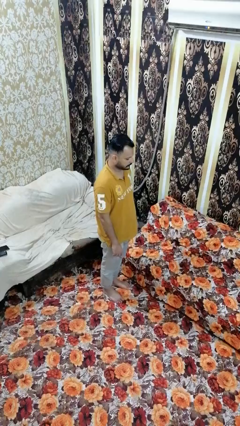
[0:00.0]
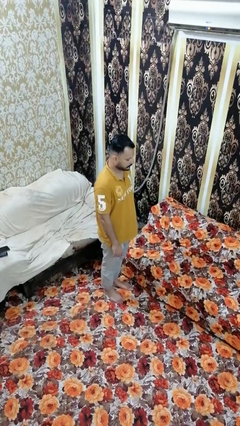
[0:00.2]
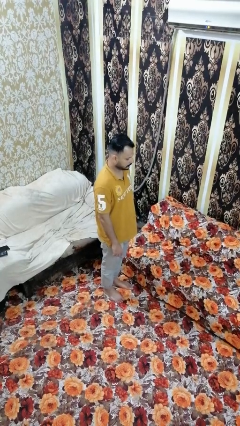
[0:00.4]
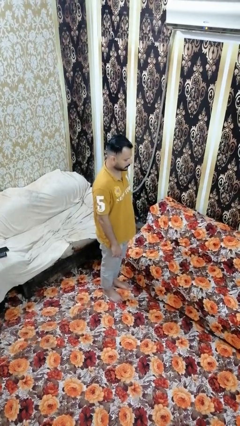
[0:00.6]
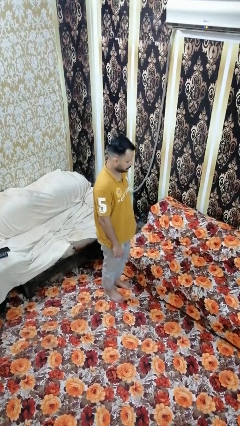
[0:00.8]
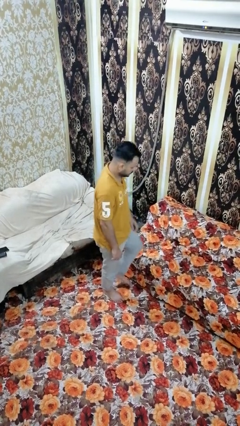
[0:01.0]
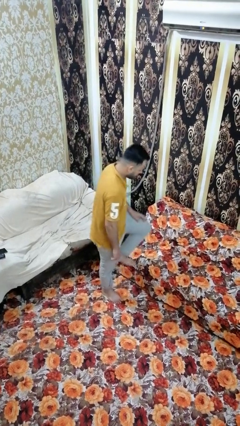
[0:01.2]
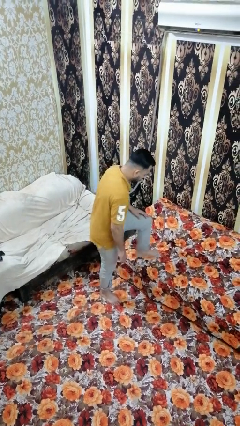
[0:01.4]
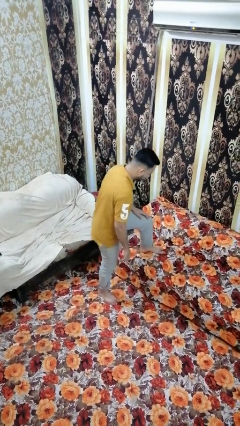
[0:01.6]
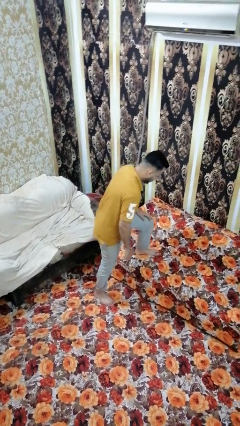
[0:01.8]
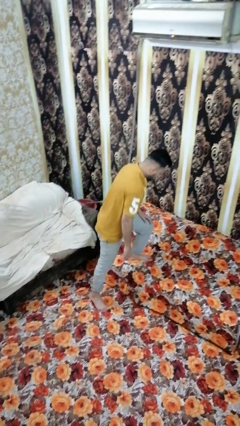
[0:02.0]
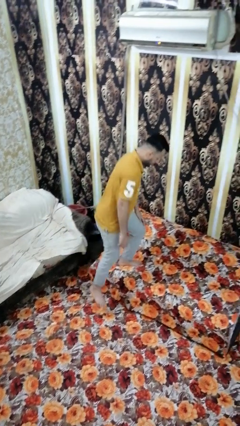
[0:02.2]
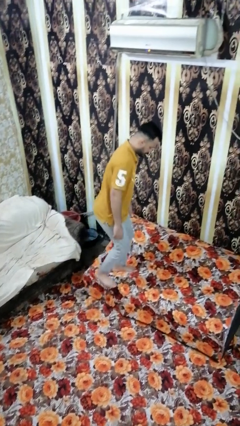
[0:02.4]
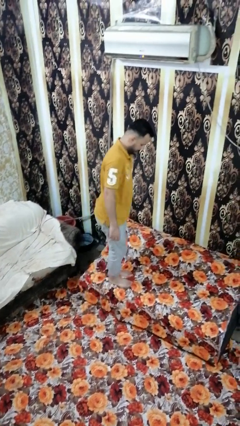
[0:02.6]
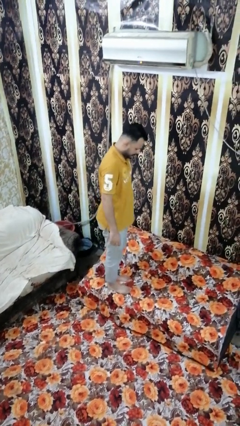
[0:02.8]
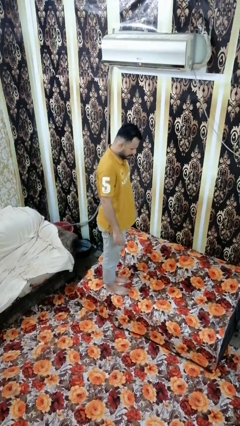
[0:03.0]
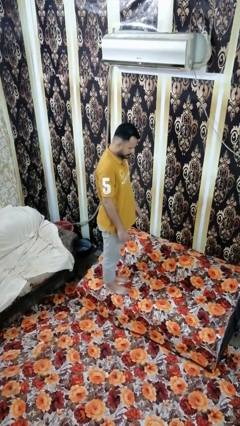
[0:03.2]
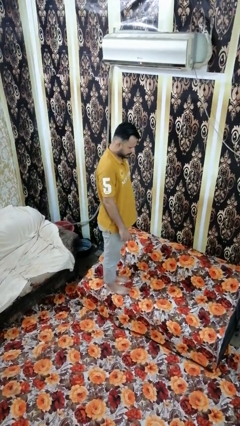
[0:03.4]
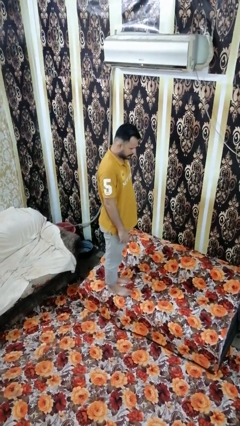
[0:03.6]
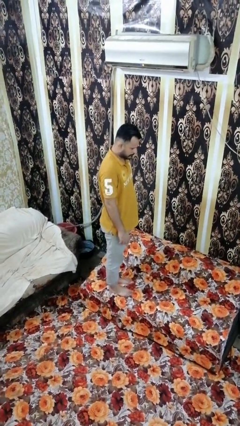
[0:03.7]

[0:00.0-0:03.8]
person climbs on couch

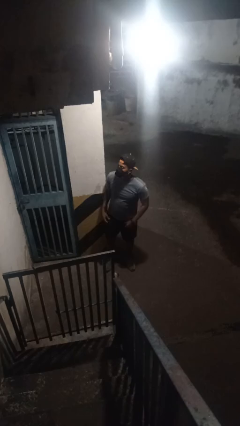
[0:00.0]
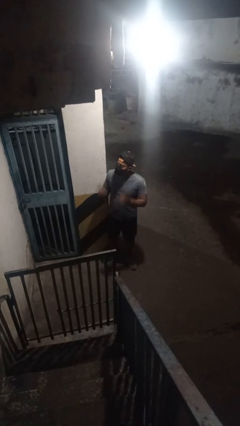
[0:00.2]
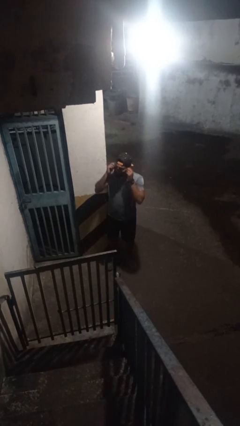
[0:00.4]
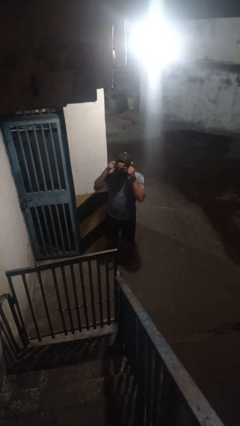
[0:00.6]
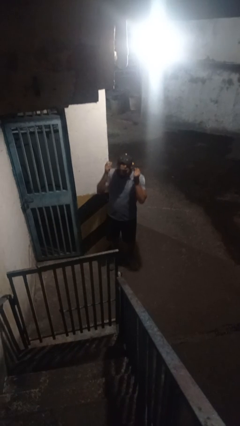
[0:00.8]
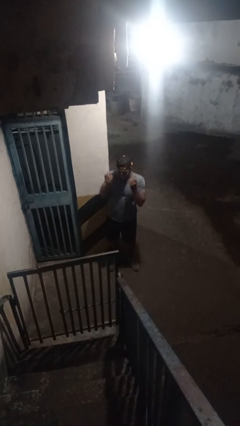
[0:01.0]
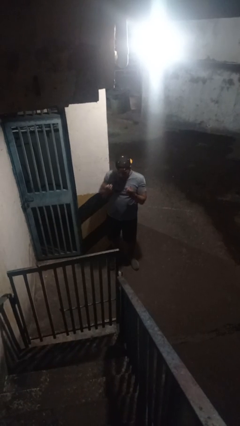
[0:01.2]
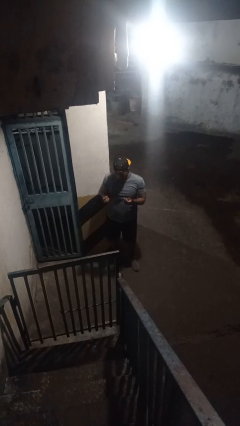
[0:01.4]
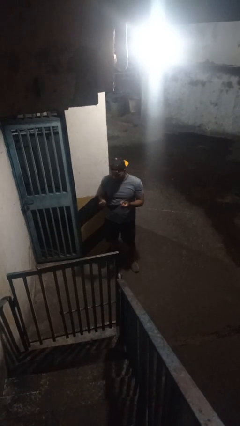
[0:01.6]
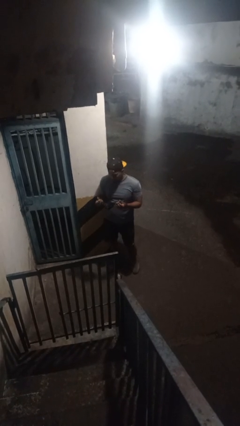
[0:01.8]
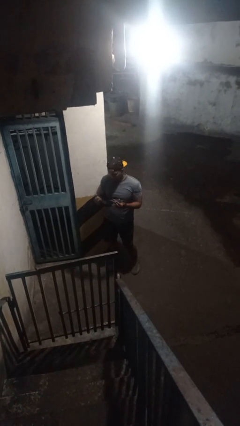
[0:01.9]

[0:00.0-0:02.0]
person takes off facemask

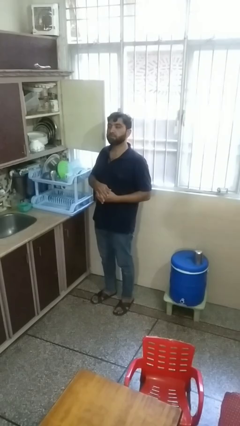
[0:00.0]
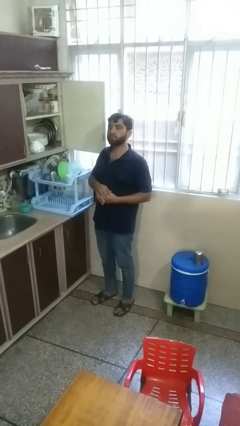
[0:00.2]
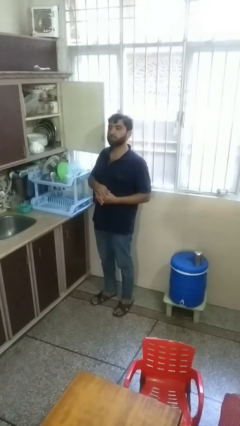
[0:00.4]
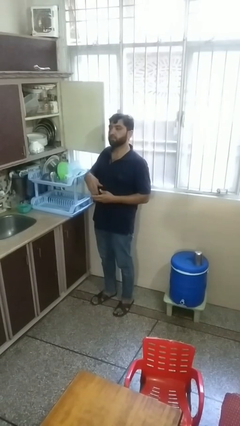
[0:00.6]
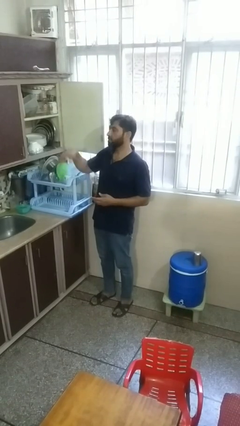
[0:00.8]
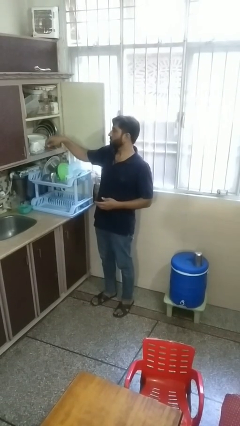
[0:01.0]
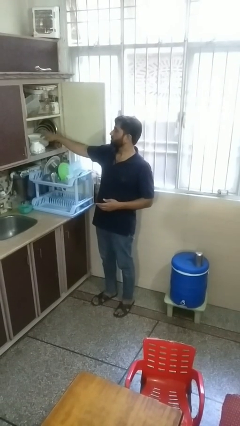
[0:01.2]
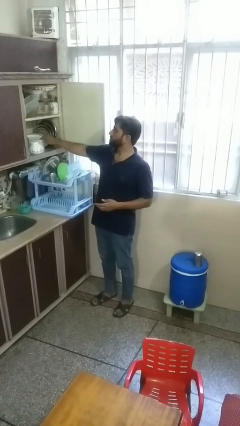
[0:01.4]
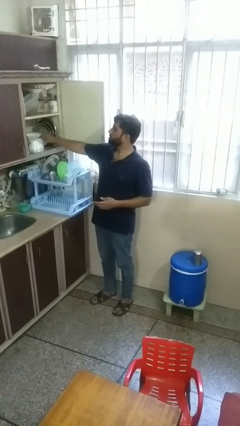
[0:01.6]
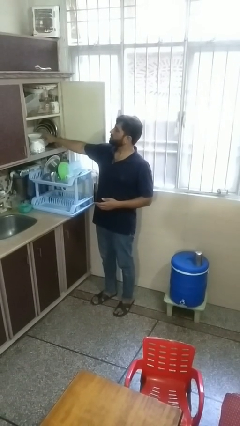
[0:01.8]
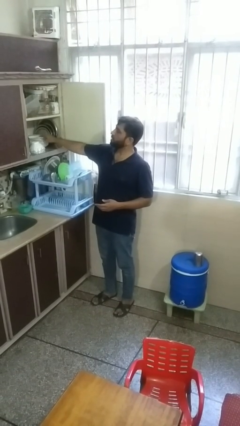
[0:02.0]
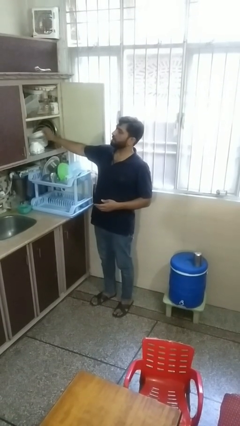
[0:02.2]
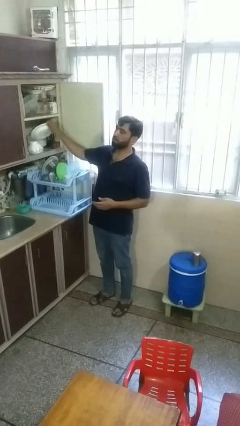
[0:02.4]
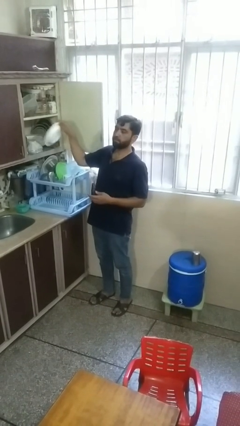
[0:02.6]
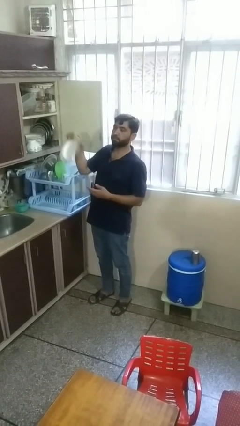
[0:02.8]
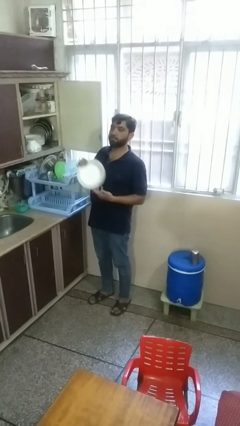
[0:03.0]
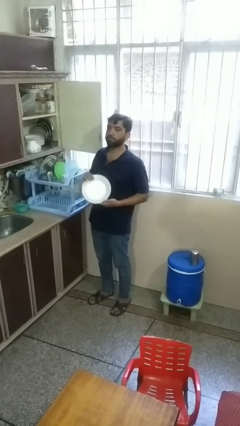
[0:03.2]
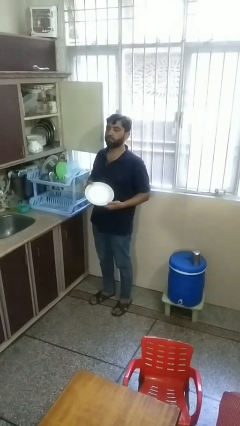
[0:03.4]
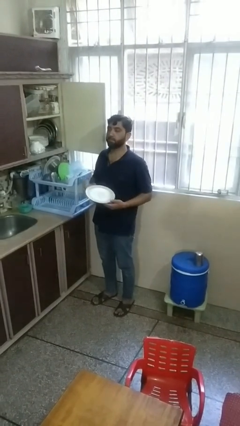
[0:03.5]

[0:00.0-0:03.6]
person takes object from cabinet

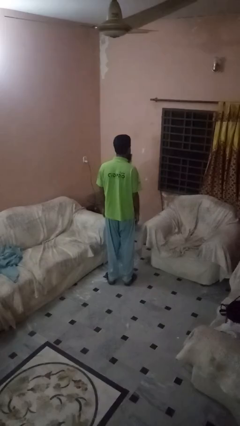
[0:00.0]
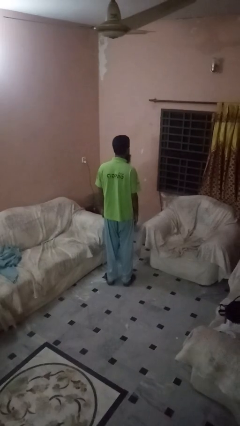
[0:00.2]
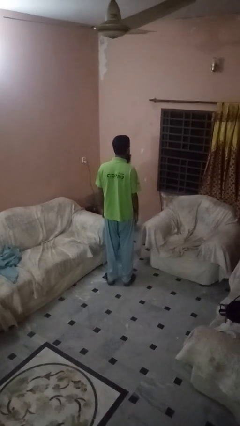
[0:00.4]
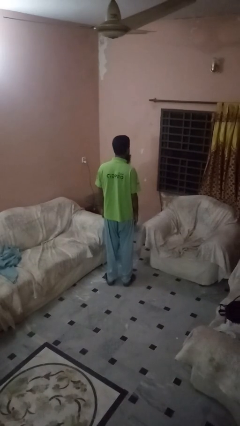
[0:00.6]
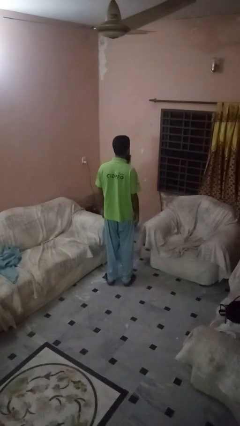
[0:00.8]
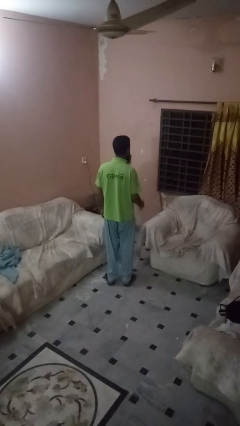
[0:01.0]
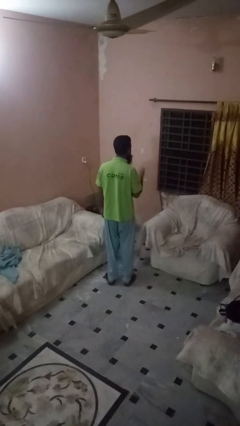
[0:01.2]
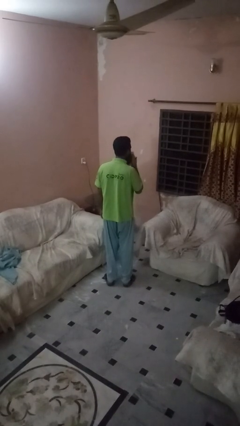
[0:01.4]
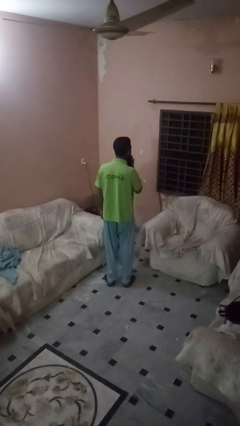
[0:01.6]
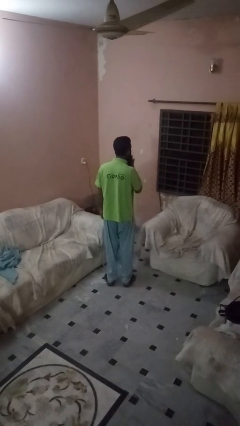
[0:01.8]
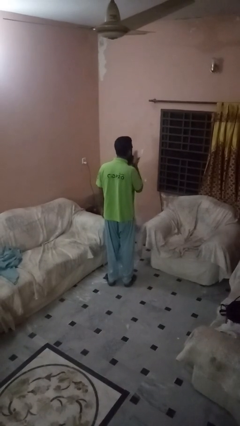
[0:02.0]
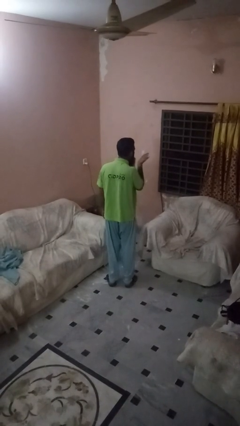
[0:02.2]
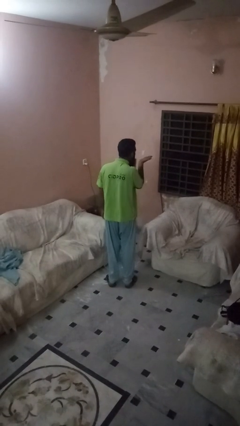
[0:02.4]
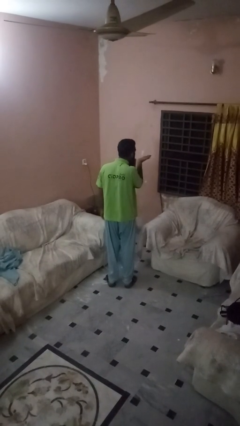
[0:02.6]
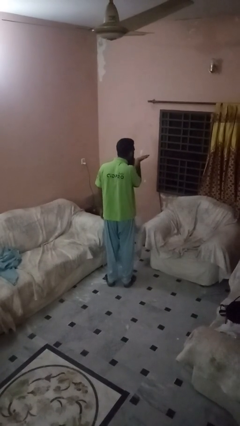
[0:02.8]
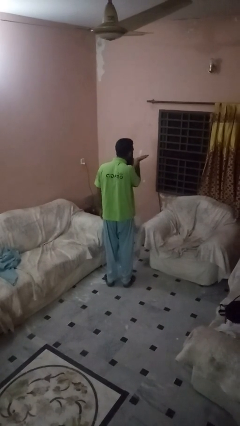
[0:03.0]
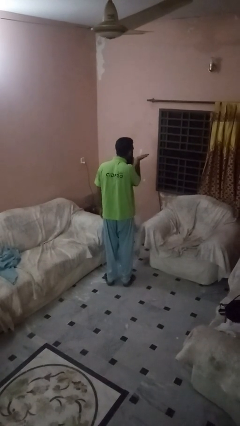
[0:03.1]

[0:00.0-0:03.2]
person gestures blow kiss

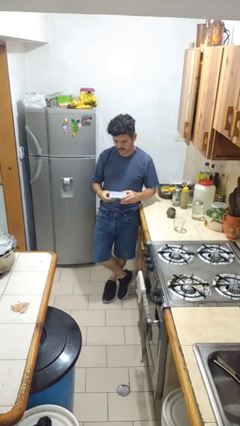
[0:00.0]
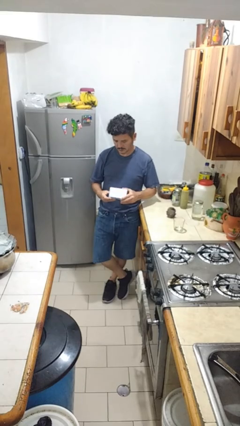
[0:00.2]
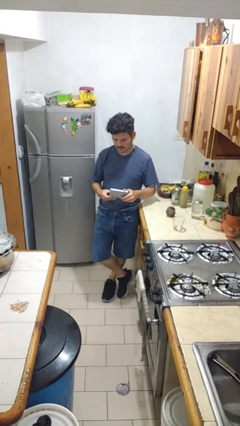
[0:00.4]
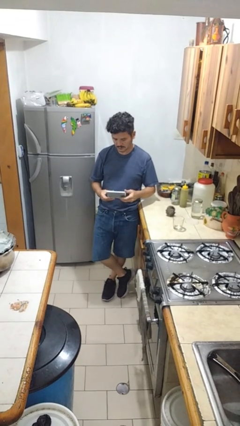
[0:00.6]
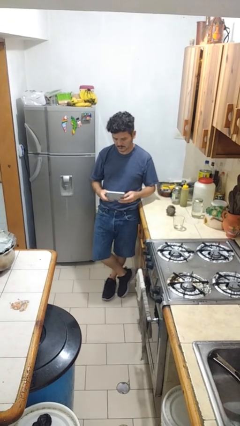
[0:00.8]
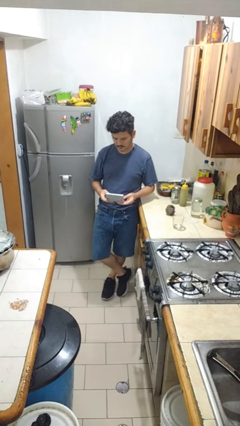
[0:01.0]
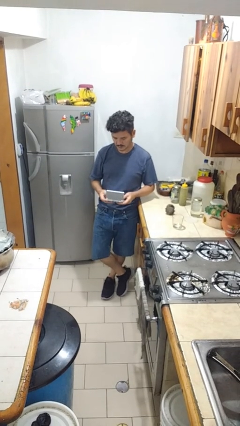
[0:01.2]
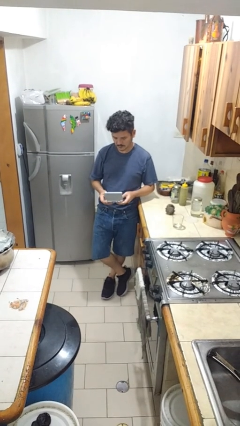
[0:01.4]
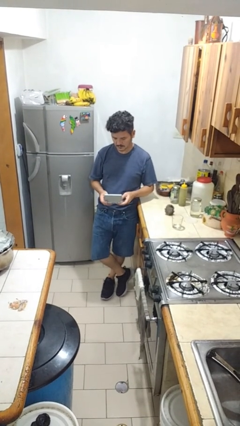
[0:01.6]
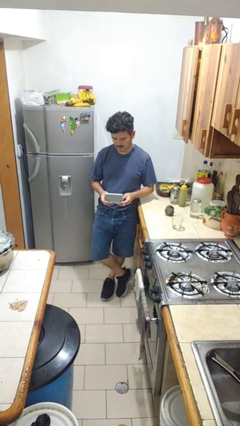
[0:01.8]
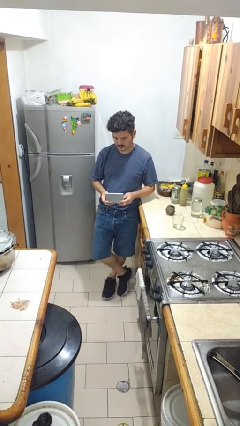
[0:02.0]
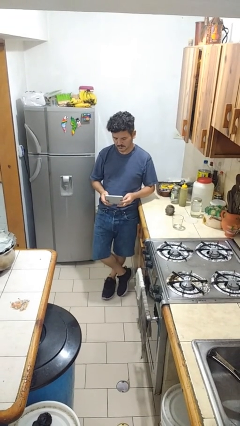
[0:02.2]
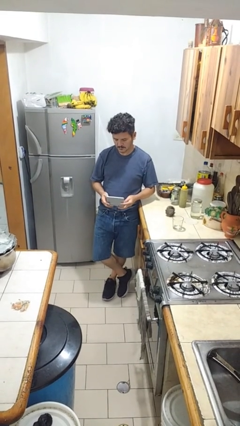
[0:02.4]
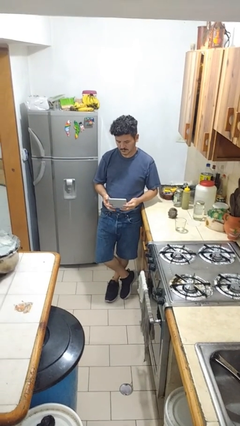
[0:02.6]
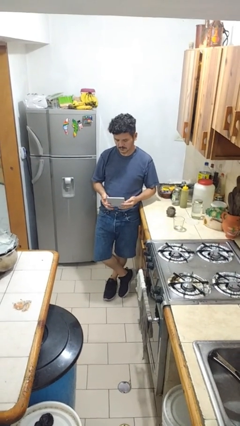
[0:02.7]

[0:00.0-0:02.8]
person interacts with handheld game

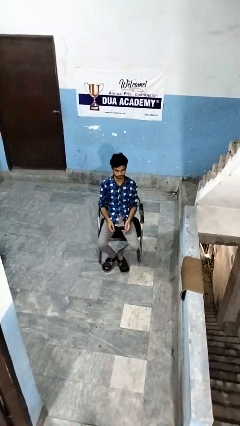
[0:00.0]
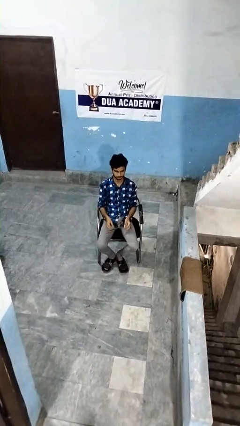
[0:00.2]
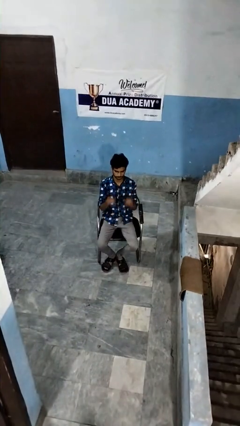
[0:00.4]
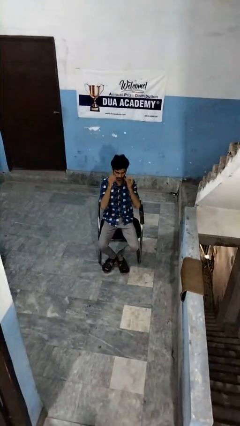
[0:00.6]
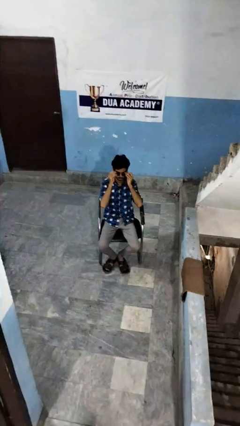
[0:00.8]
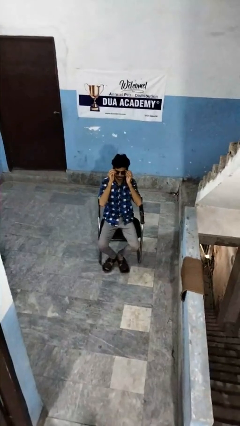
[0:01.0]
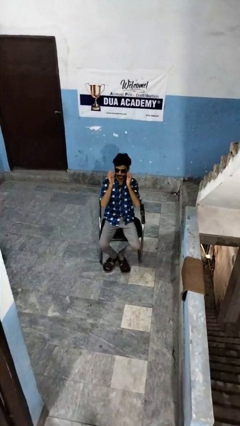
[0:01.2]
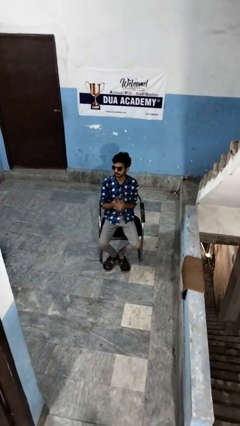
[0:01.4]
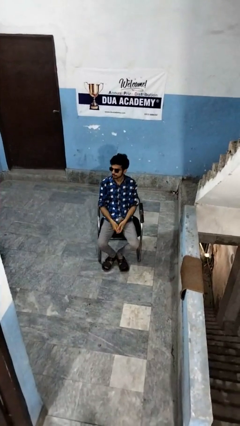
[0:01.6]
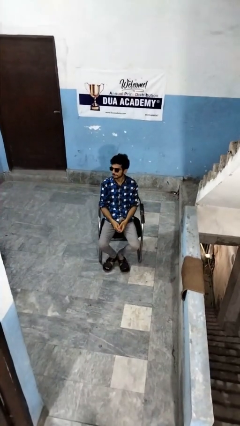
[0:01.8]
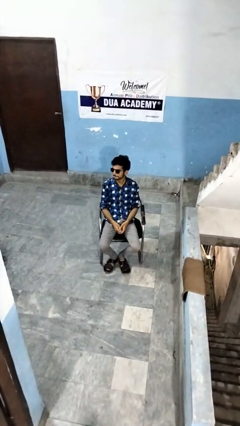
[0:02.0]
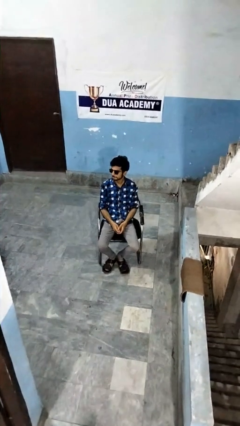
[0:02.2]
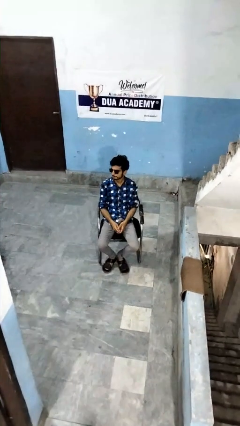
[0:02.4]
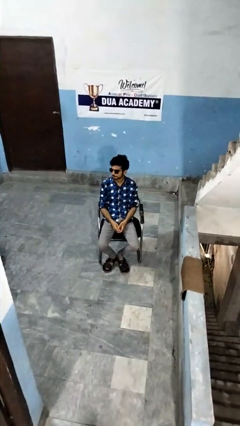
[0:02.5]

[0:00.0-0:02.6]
person puts on sunglasses
